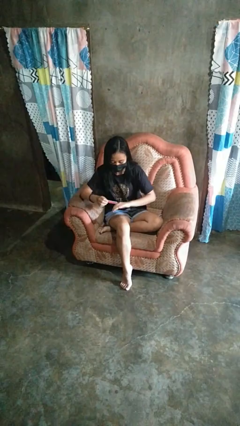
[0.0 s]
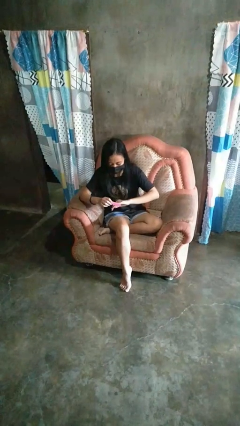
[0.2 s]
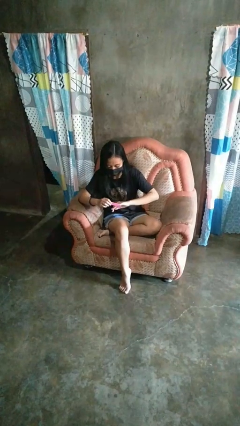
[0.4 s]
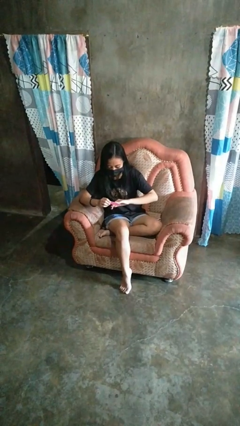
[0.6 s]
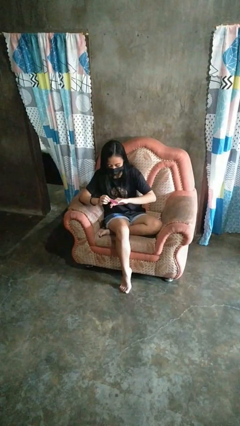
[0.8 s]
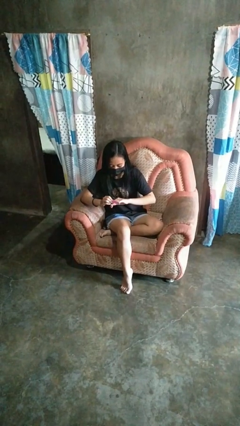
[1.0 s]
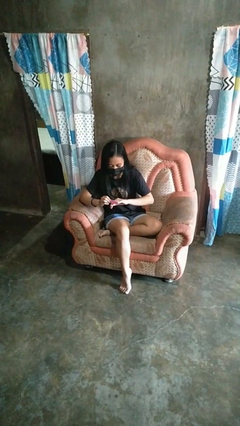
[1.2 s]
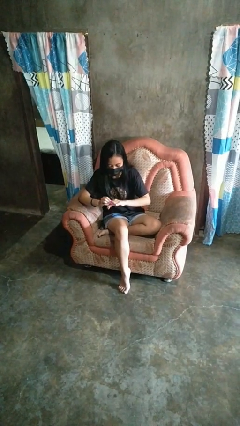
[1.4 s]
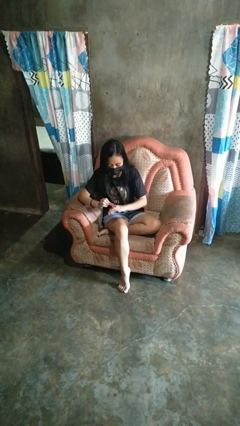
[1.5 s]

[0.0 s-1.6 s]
person files fingernails

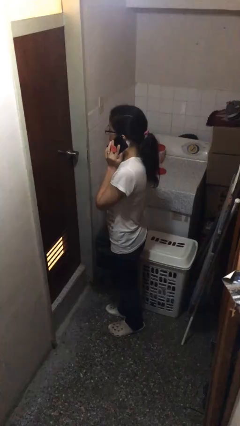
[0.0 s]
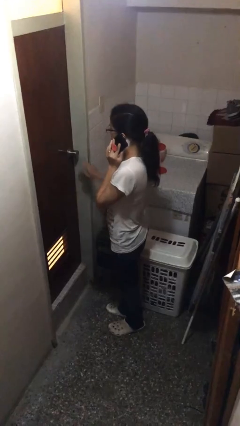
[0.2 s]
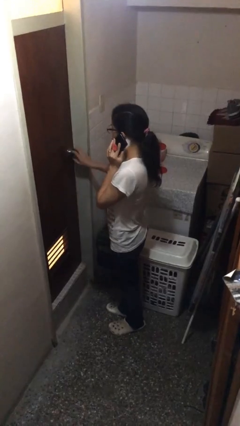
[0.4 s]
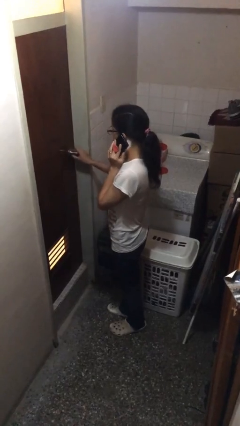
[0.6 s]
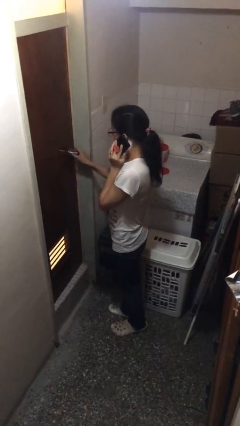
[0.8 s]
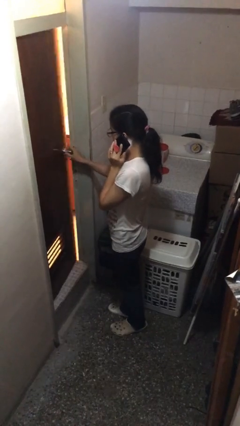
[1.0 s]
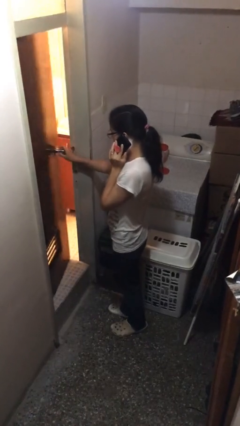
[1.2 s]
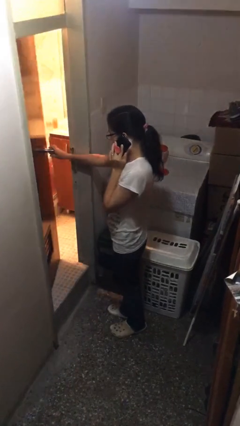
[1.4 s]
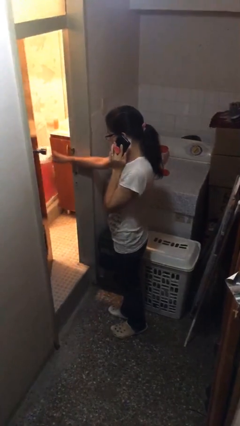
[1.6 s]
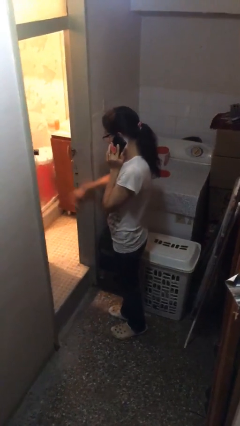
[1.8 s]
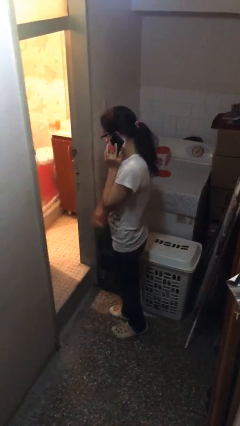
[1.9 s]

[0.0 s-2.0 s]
person opens facility door

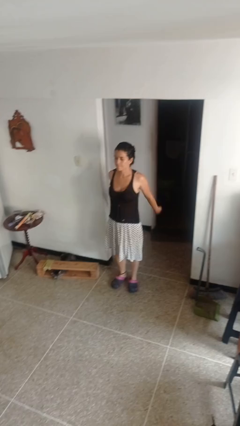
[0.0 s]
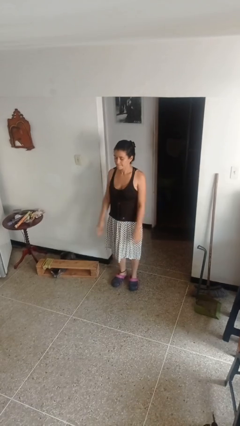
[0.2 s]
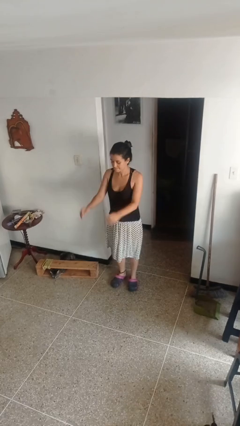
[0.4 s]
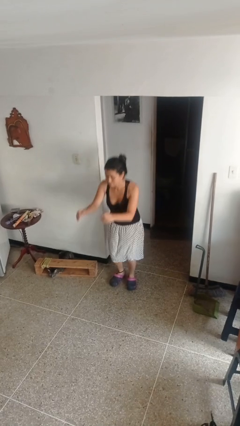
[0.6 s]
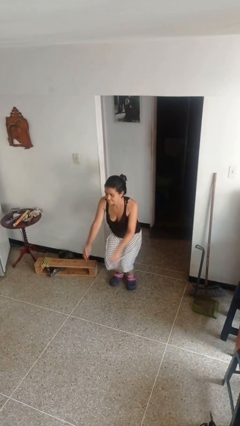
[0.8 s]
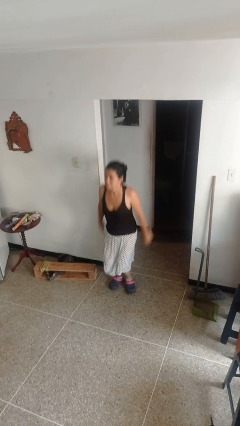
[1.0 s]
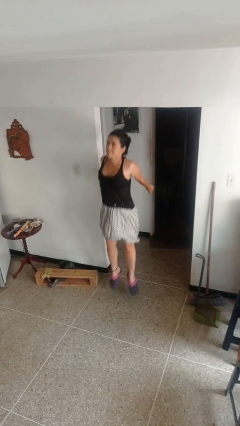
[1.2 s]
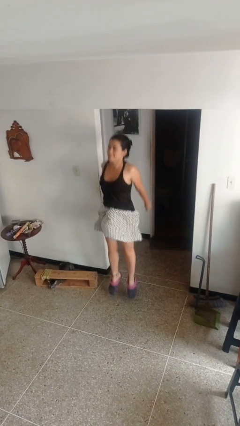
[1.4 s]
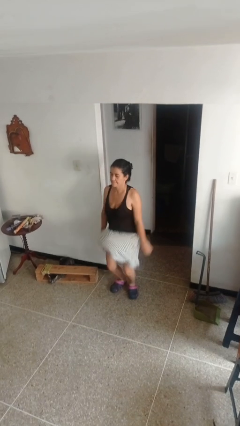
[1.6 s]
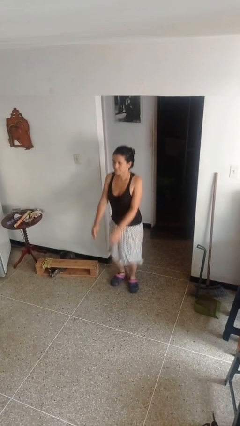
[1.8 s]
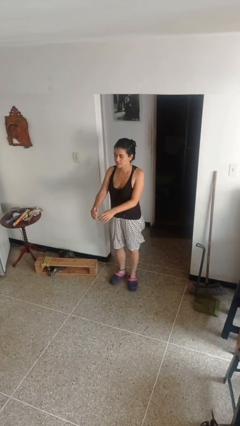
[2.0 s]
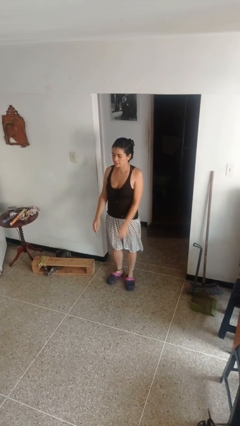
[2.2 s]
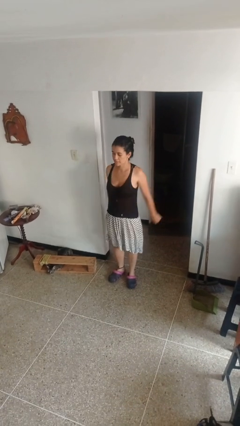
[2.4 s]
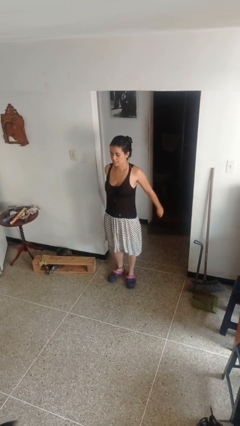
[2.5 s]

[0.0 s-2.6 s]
person jumps

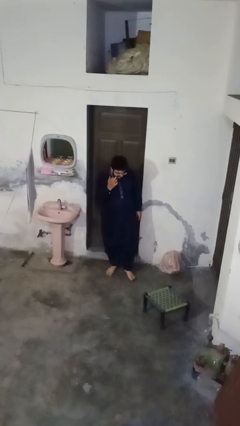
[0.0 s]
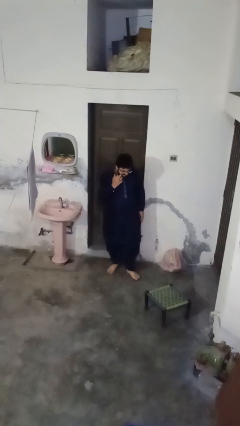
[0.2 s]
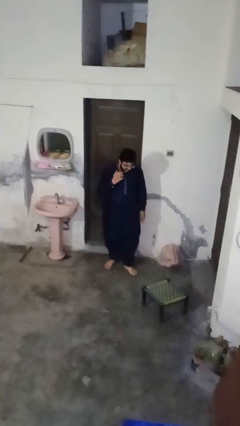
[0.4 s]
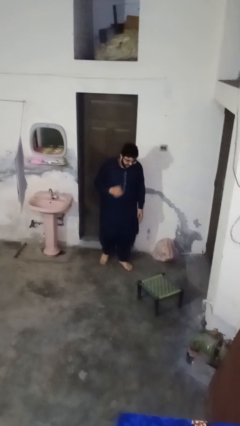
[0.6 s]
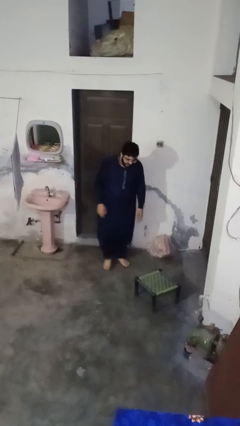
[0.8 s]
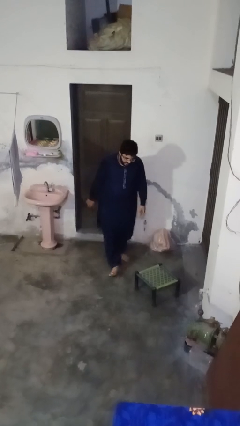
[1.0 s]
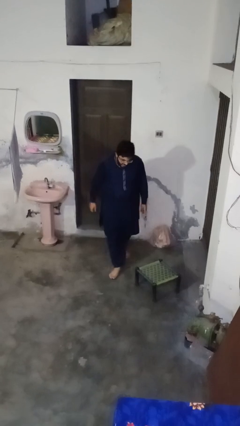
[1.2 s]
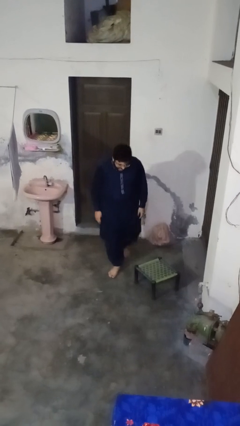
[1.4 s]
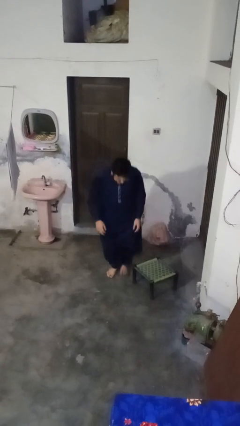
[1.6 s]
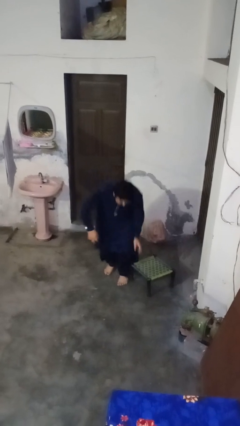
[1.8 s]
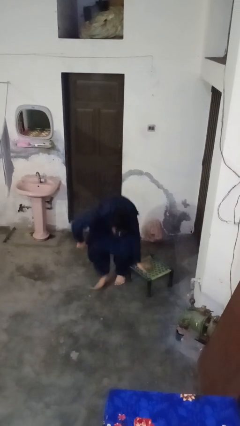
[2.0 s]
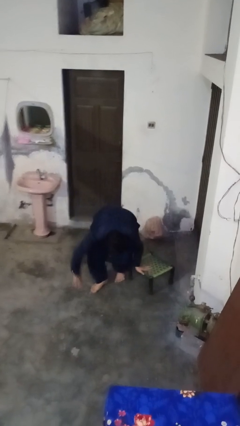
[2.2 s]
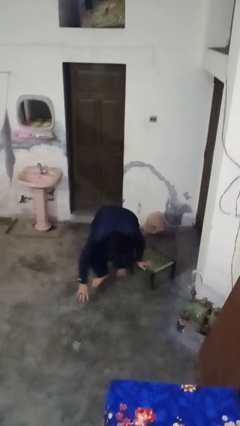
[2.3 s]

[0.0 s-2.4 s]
person trips on object on floor

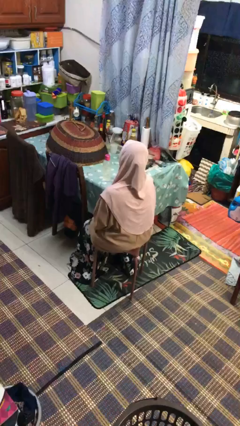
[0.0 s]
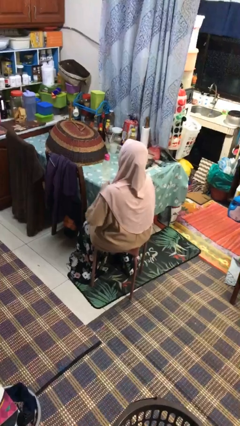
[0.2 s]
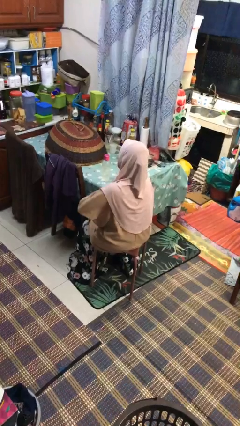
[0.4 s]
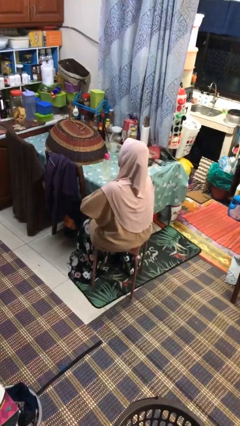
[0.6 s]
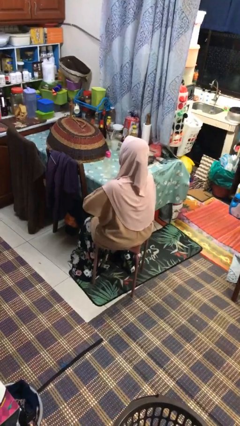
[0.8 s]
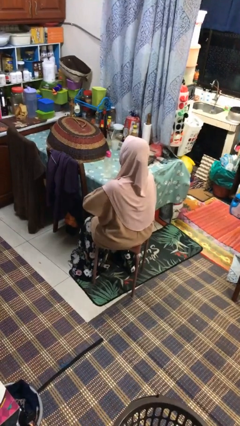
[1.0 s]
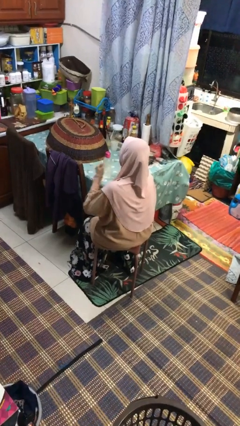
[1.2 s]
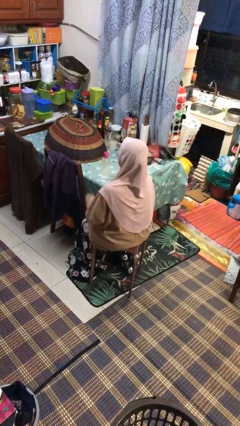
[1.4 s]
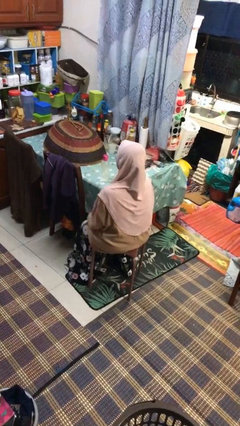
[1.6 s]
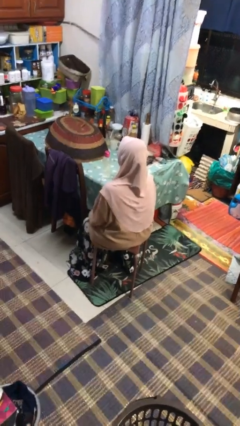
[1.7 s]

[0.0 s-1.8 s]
person drums on chest

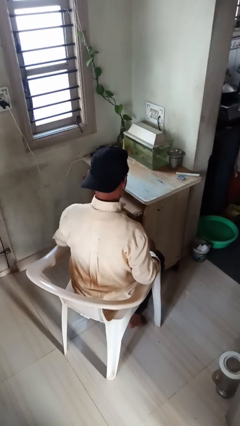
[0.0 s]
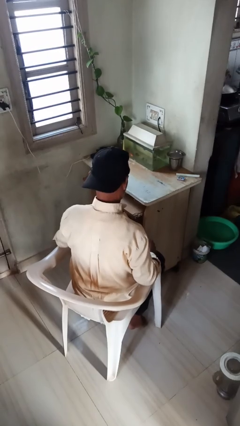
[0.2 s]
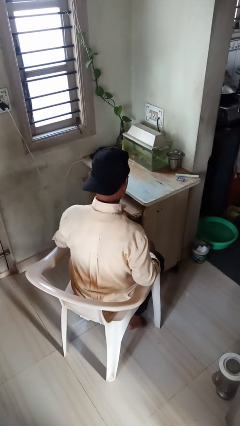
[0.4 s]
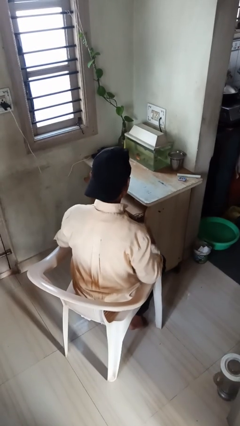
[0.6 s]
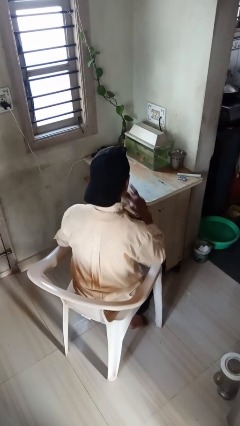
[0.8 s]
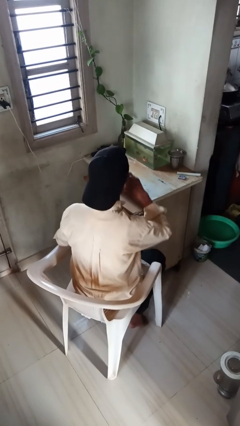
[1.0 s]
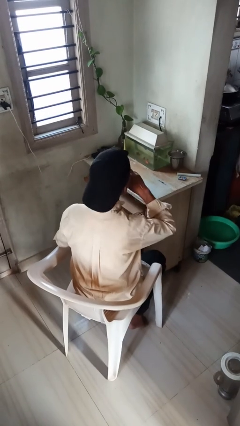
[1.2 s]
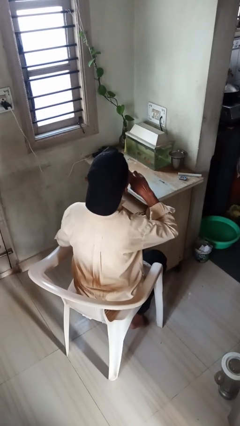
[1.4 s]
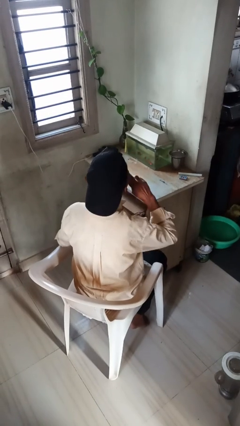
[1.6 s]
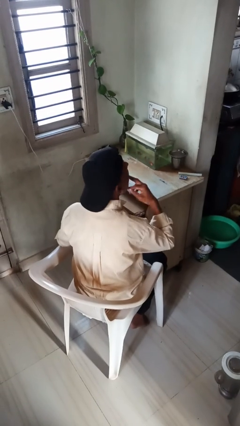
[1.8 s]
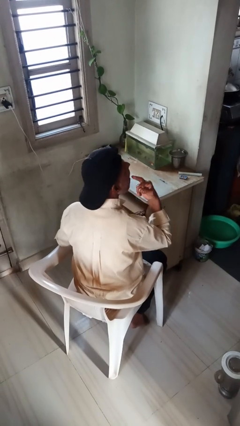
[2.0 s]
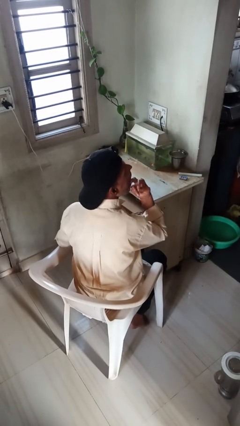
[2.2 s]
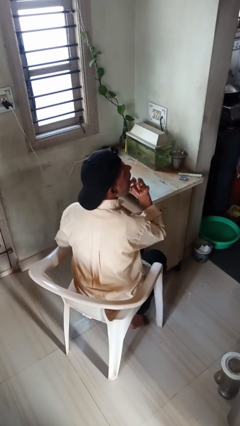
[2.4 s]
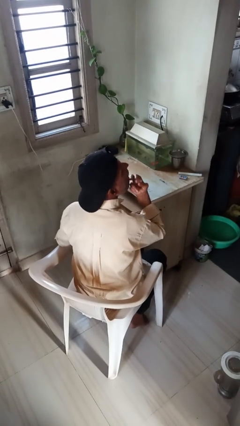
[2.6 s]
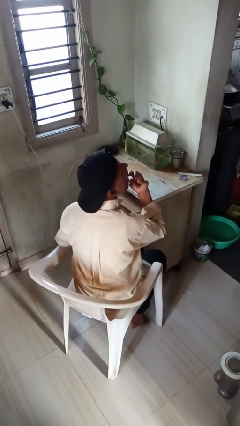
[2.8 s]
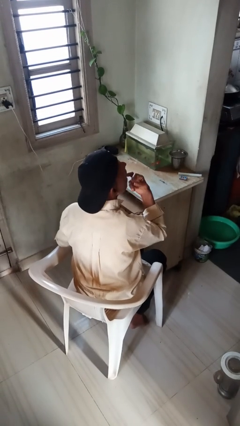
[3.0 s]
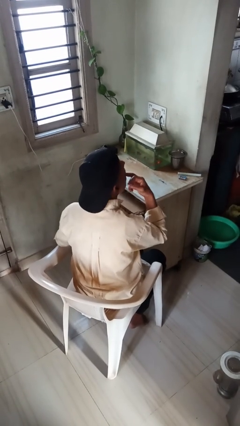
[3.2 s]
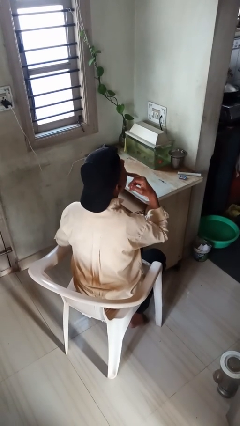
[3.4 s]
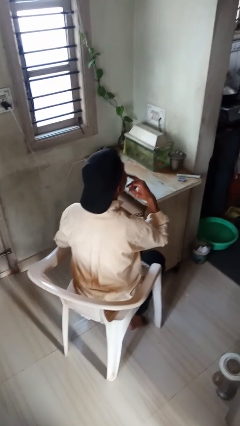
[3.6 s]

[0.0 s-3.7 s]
person licks fingers

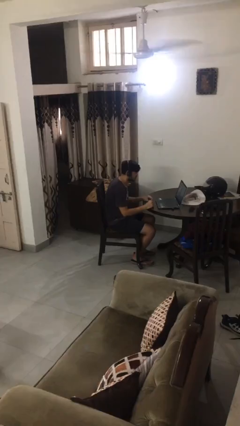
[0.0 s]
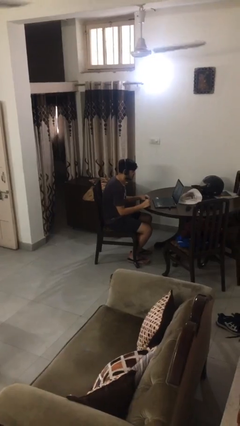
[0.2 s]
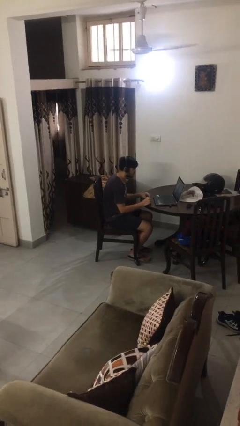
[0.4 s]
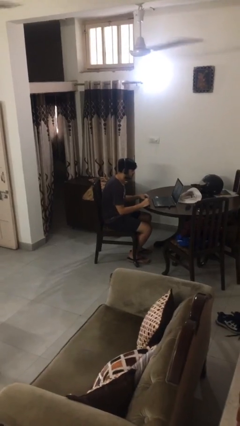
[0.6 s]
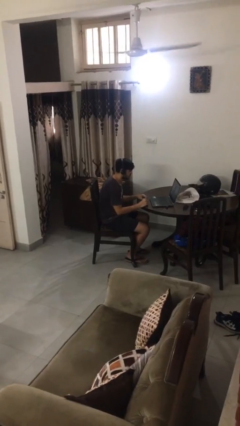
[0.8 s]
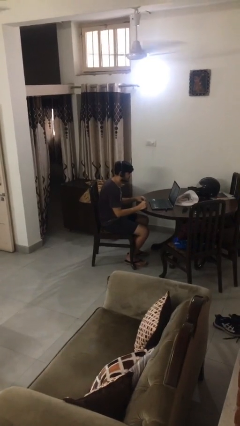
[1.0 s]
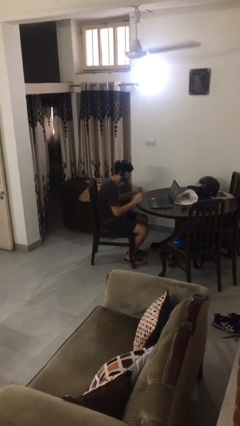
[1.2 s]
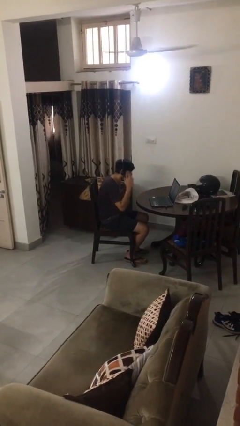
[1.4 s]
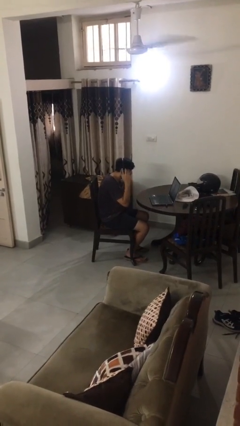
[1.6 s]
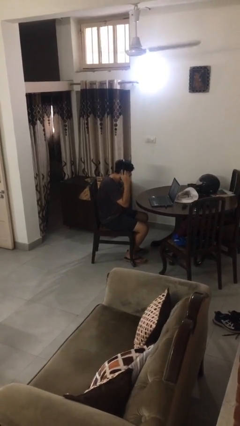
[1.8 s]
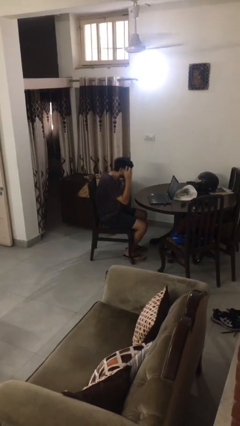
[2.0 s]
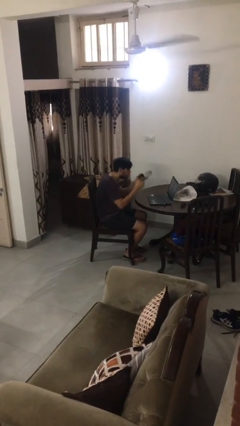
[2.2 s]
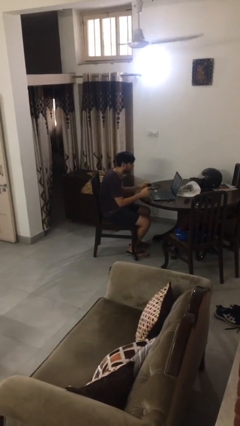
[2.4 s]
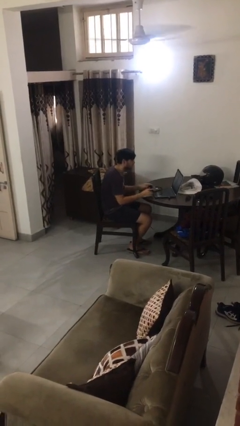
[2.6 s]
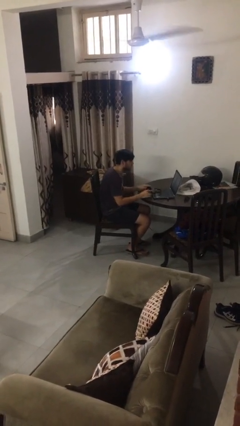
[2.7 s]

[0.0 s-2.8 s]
person takes off headphones

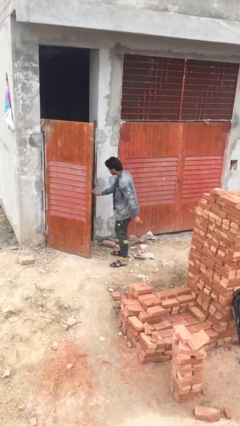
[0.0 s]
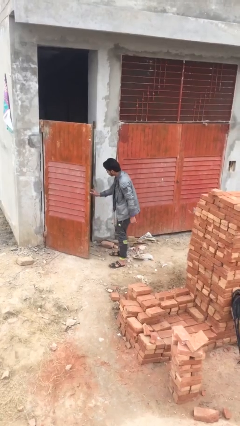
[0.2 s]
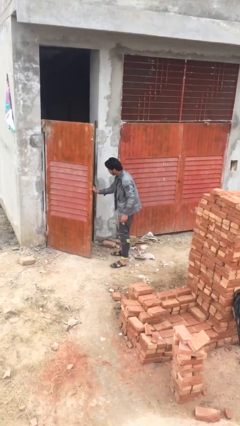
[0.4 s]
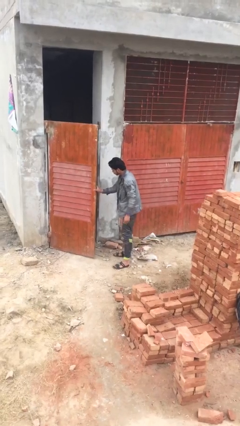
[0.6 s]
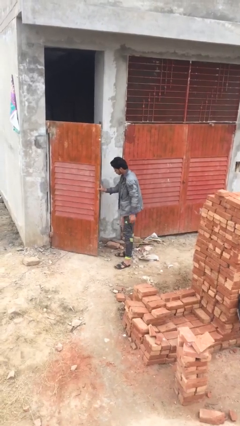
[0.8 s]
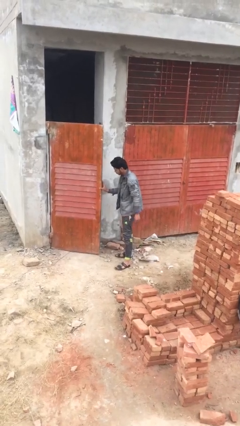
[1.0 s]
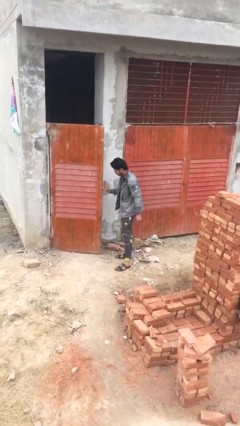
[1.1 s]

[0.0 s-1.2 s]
person closes facility door